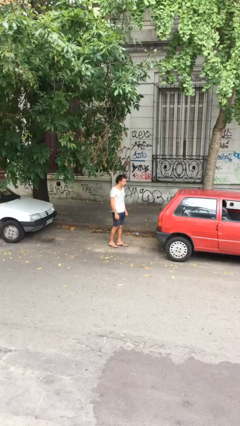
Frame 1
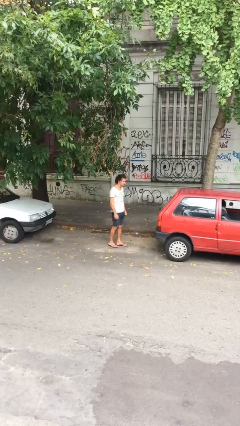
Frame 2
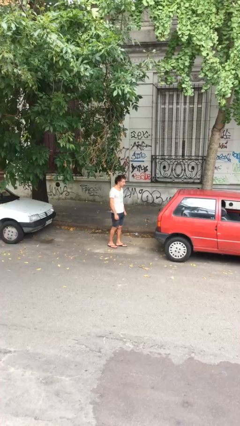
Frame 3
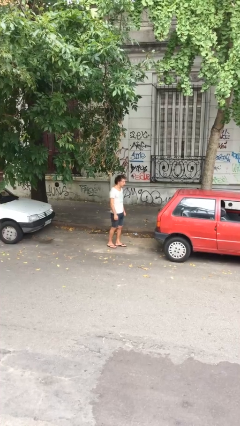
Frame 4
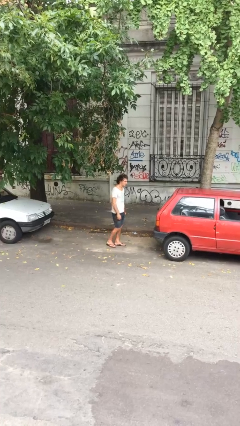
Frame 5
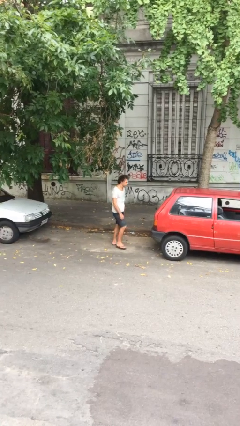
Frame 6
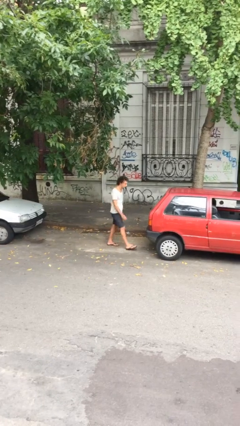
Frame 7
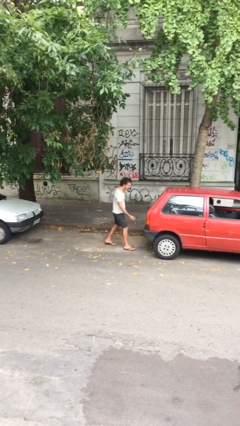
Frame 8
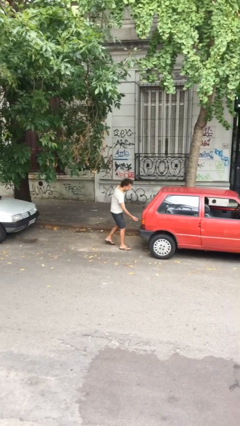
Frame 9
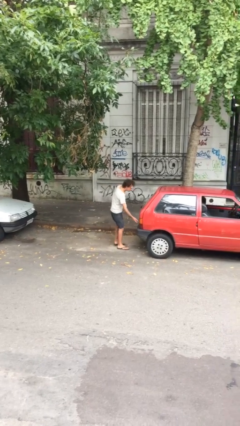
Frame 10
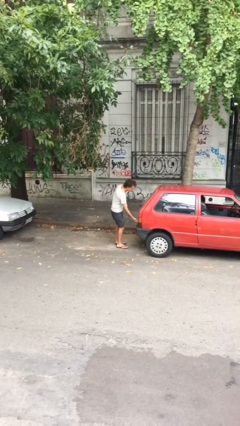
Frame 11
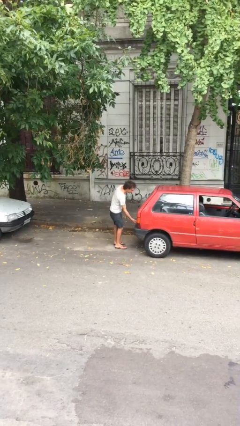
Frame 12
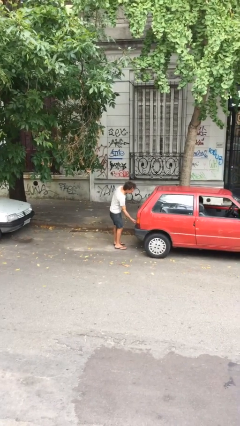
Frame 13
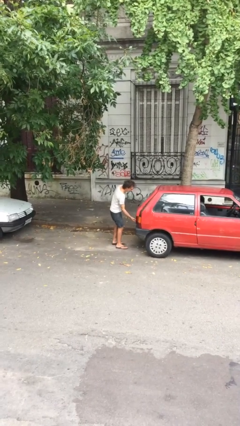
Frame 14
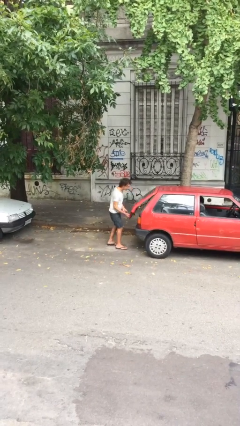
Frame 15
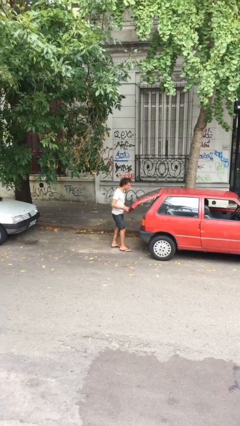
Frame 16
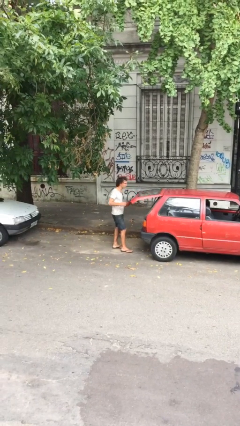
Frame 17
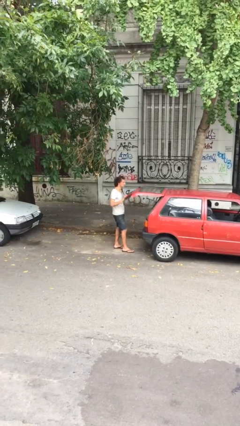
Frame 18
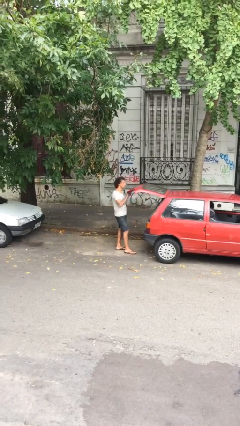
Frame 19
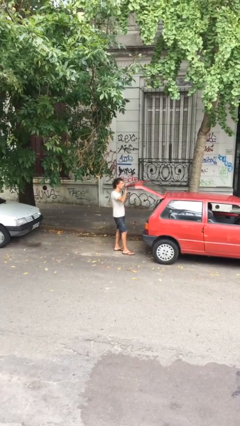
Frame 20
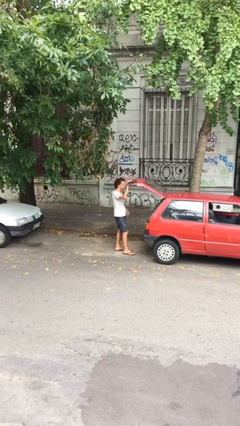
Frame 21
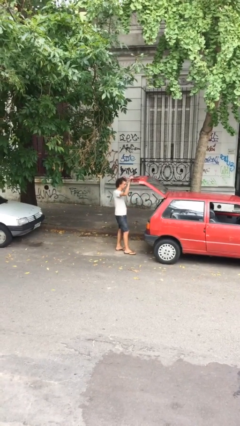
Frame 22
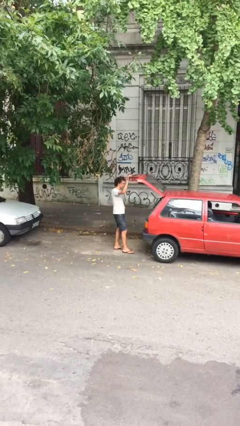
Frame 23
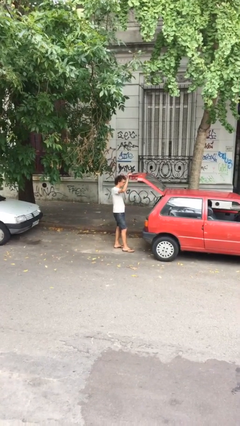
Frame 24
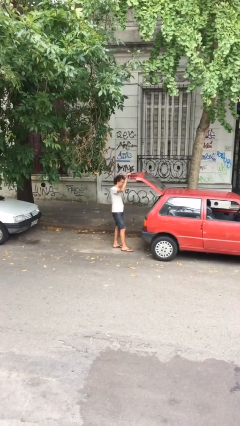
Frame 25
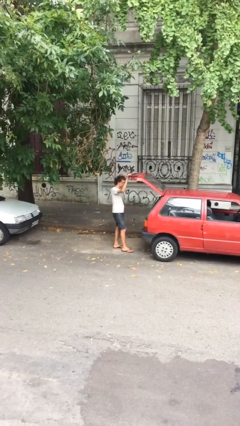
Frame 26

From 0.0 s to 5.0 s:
person opens car trunk

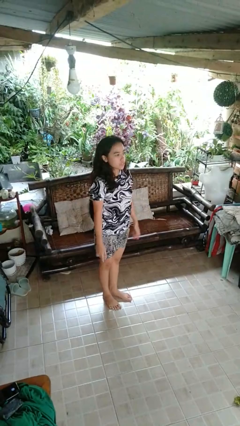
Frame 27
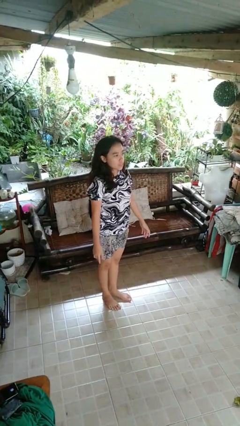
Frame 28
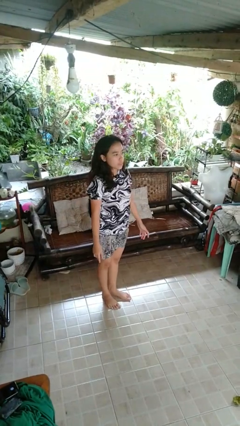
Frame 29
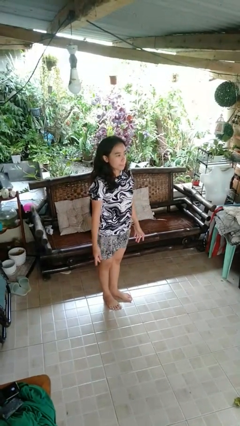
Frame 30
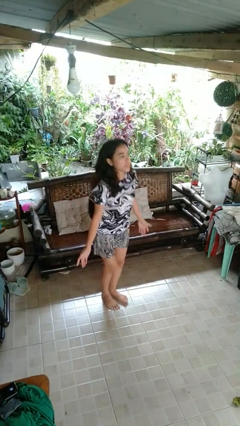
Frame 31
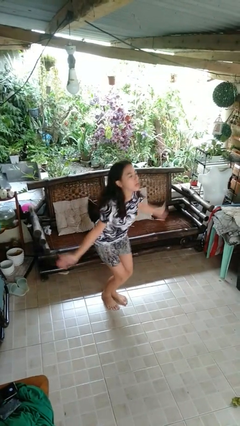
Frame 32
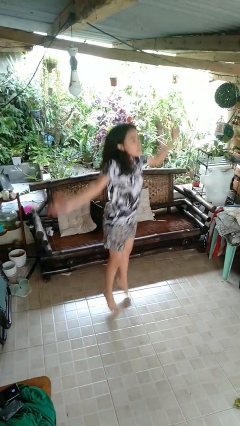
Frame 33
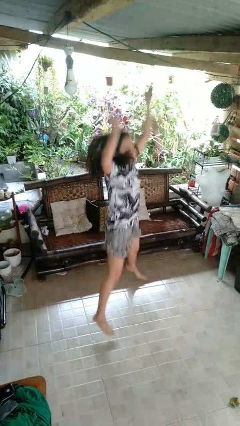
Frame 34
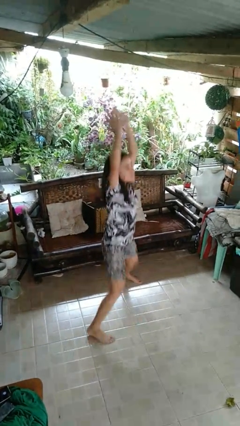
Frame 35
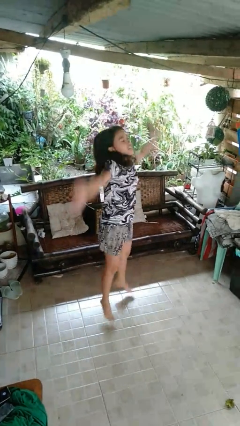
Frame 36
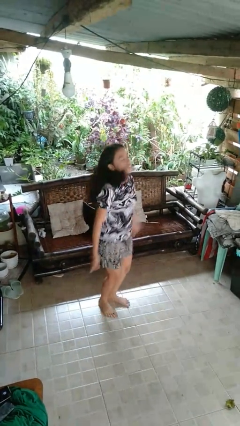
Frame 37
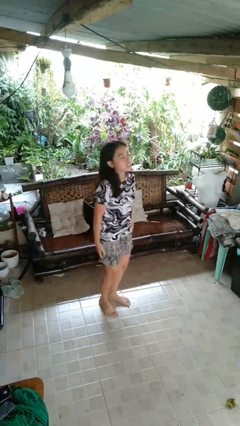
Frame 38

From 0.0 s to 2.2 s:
person exercises with jumping jacks

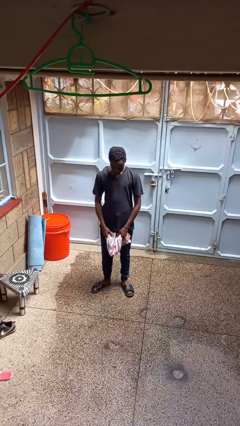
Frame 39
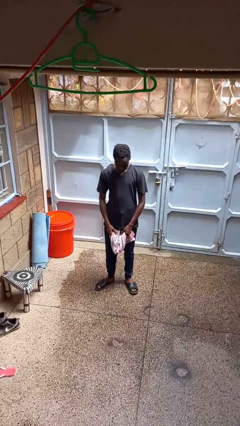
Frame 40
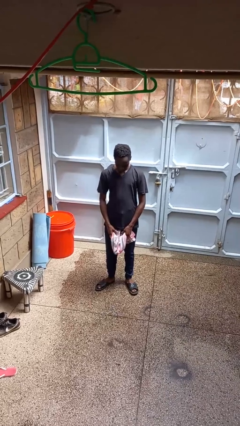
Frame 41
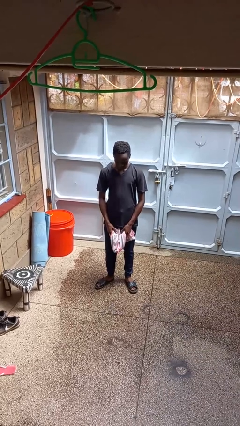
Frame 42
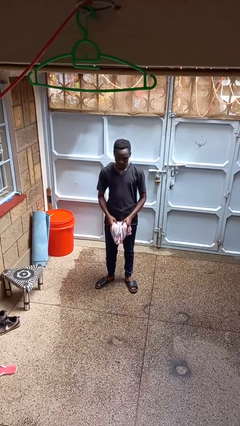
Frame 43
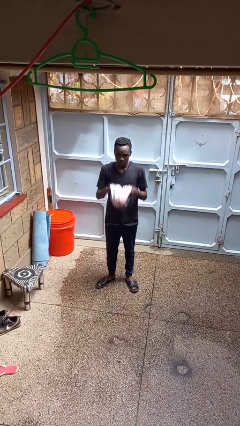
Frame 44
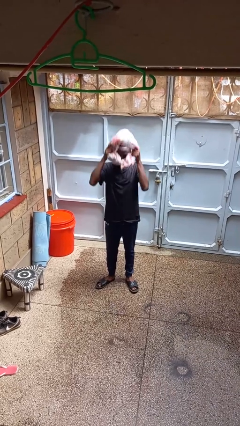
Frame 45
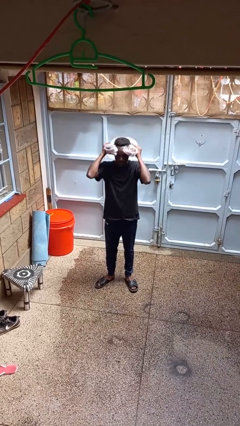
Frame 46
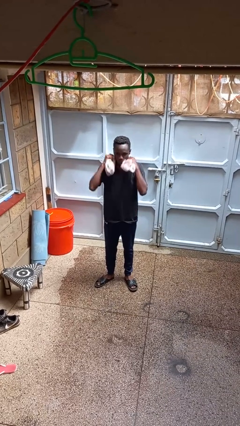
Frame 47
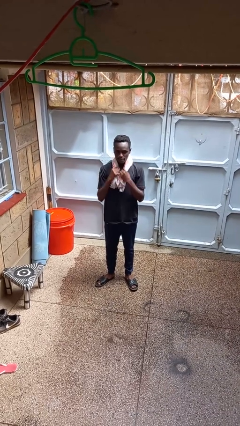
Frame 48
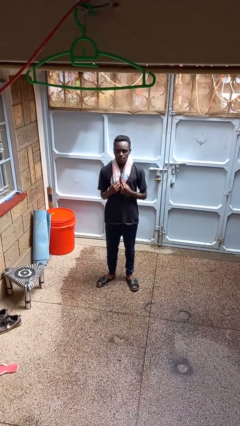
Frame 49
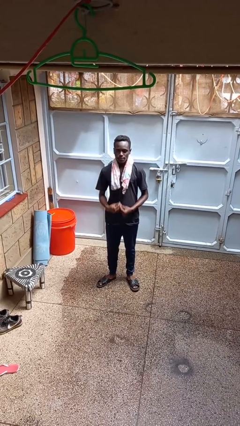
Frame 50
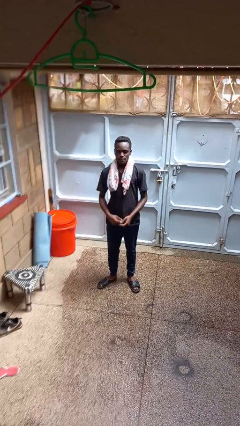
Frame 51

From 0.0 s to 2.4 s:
person puts on scarf

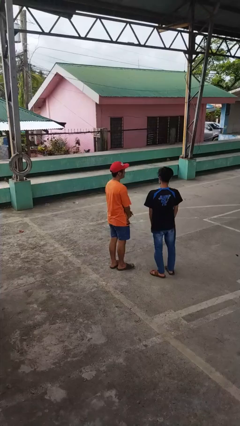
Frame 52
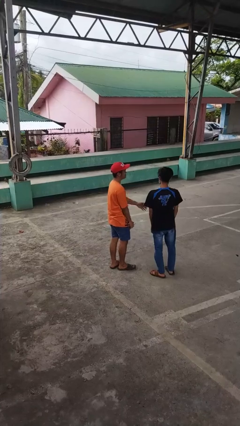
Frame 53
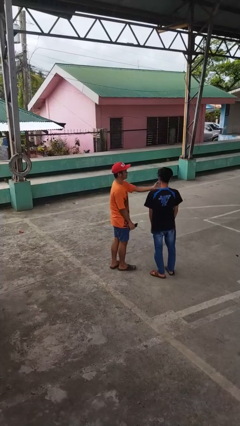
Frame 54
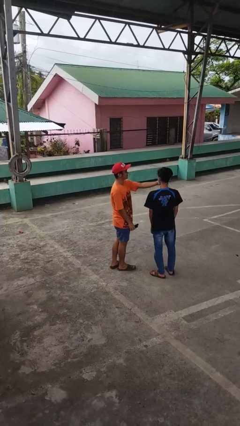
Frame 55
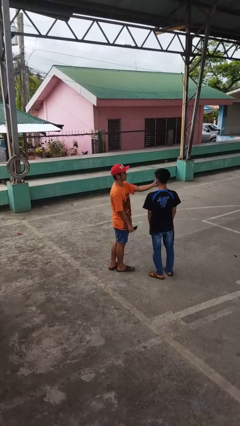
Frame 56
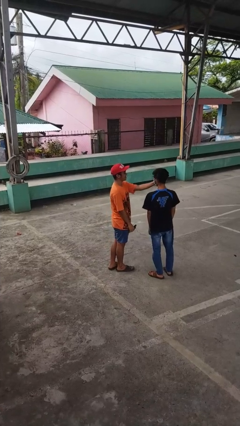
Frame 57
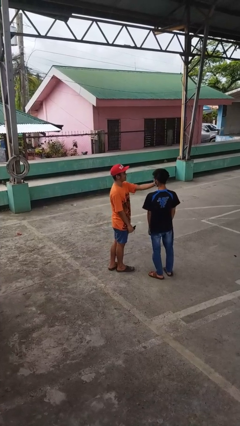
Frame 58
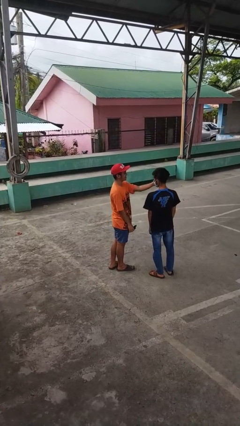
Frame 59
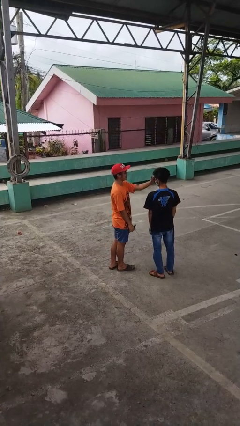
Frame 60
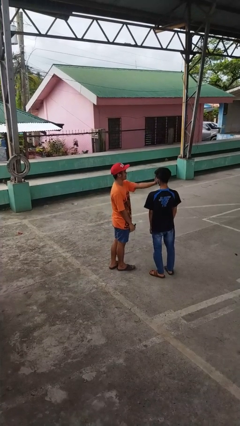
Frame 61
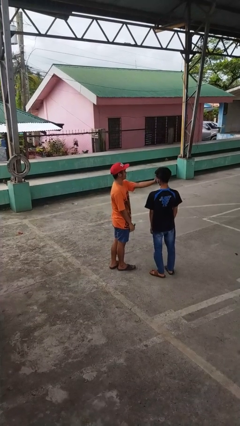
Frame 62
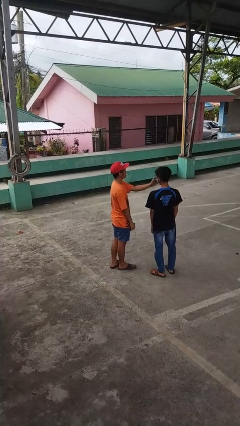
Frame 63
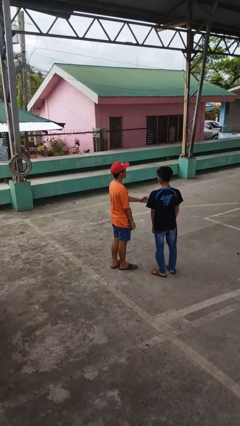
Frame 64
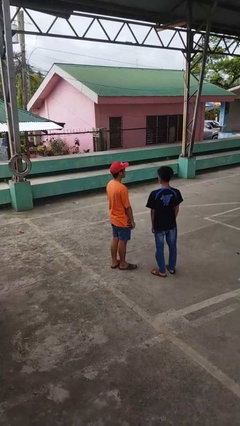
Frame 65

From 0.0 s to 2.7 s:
person touches face of person

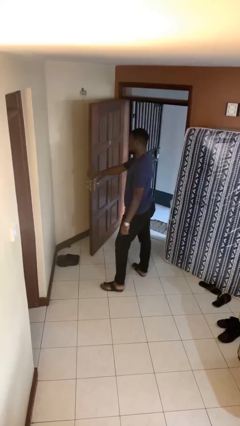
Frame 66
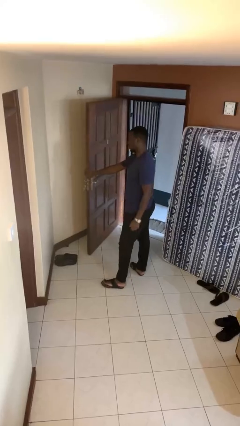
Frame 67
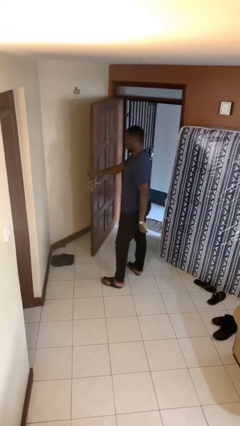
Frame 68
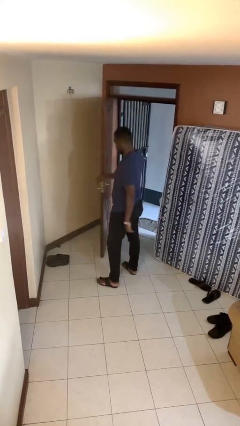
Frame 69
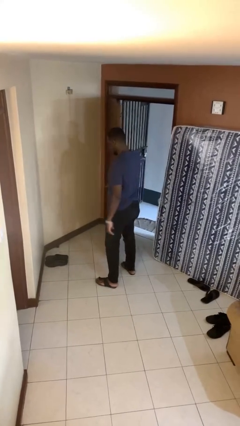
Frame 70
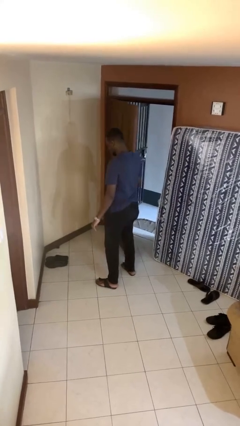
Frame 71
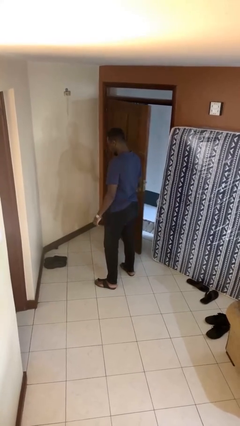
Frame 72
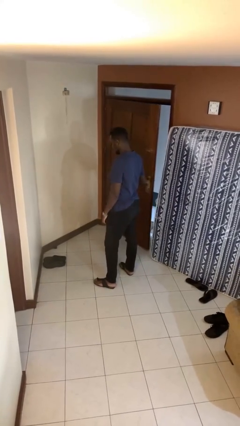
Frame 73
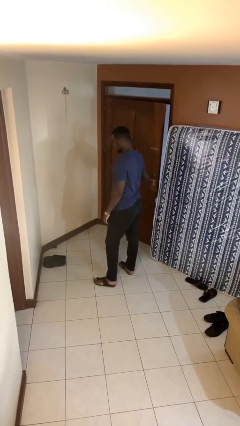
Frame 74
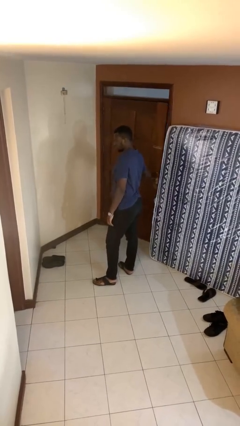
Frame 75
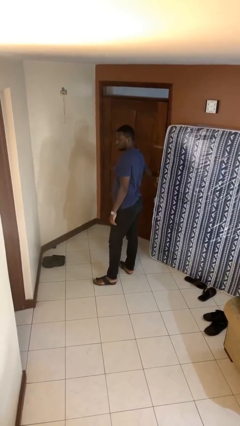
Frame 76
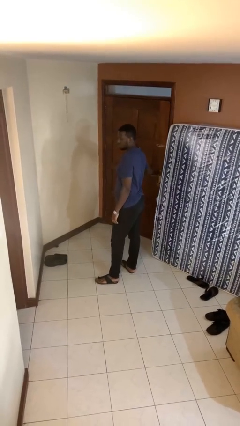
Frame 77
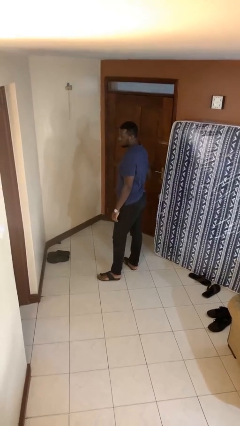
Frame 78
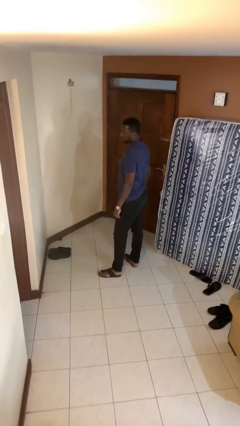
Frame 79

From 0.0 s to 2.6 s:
person closes facility door

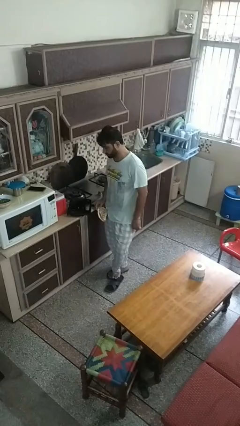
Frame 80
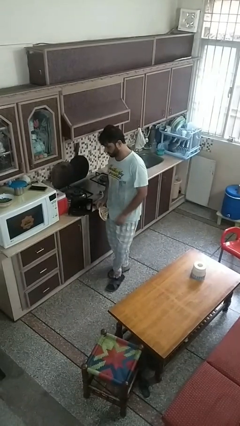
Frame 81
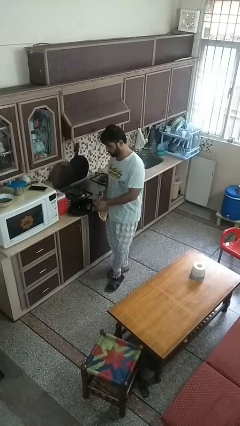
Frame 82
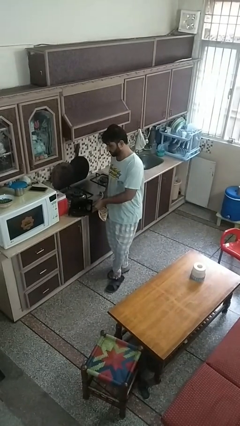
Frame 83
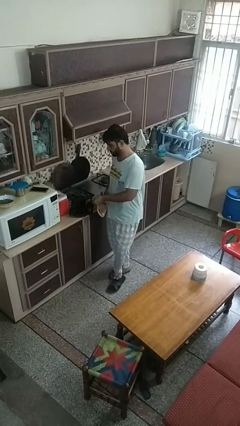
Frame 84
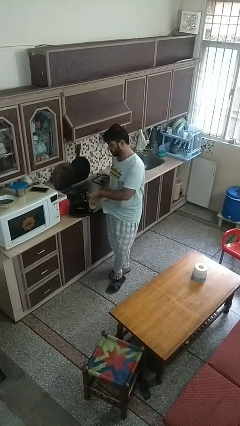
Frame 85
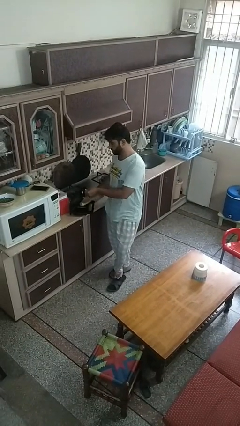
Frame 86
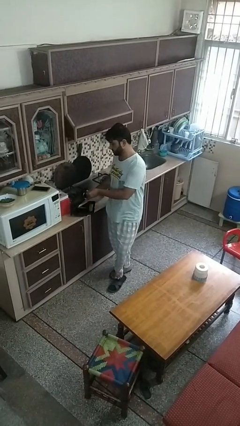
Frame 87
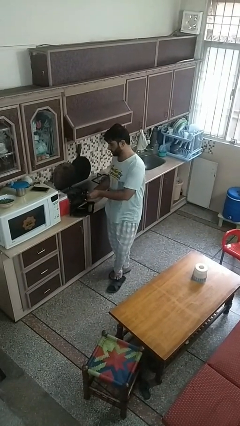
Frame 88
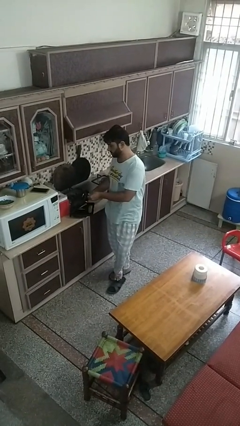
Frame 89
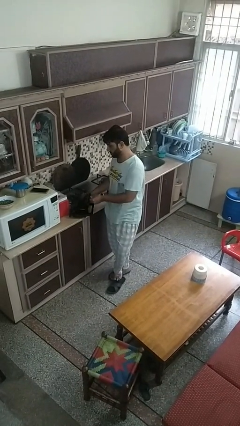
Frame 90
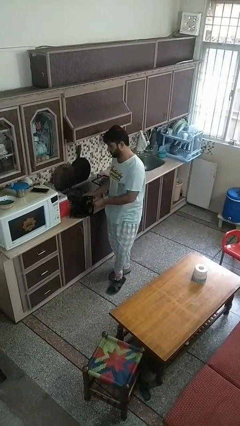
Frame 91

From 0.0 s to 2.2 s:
person puts object into toaster

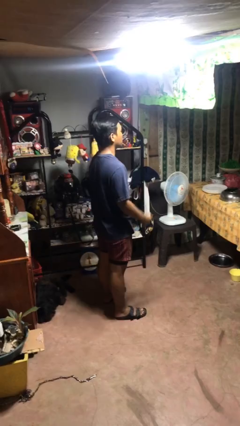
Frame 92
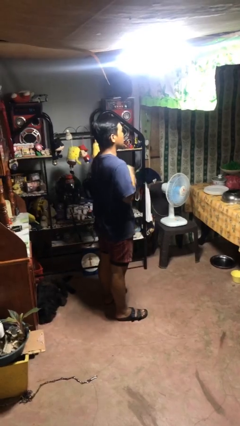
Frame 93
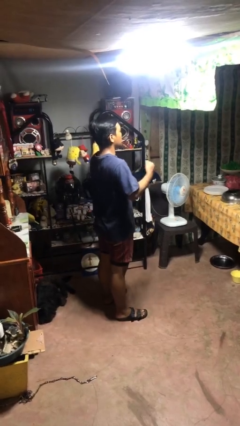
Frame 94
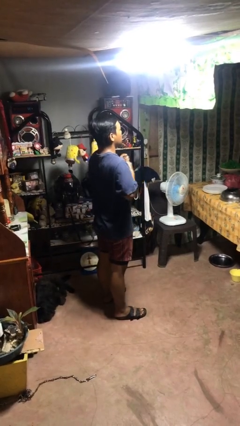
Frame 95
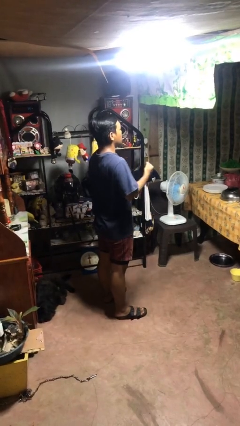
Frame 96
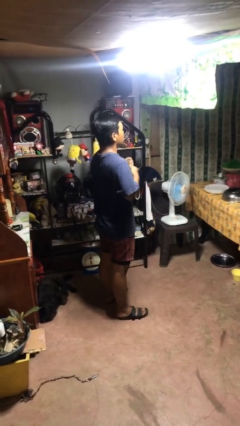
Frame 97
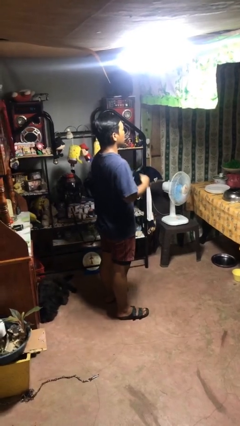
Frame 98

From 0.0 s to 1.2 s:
person drums on chest
